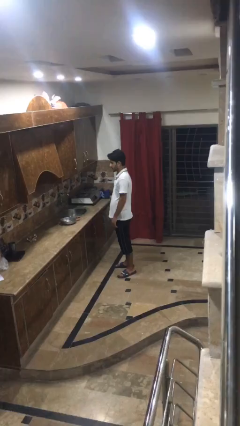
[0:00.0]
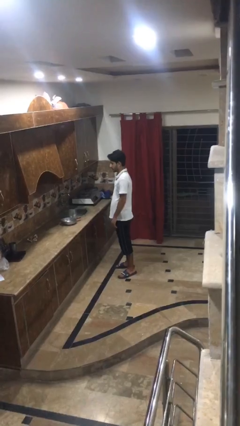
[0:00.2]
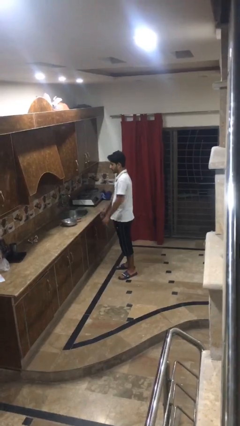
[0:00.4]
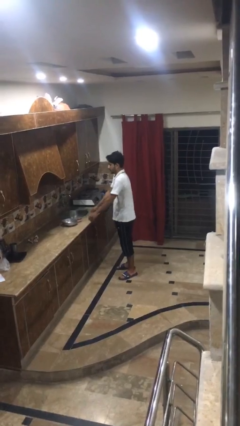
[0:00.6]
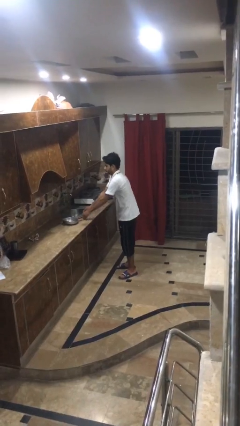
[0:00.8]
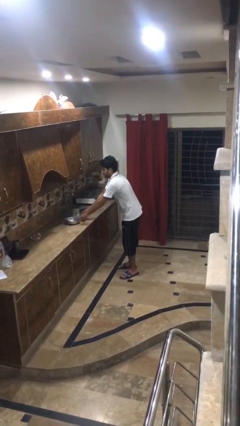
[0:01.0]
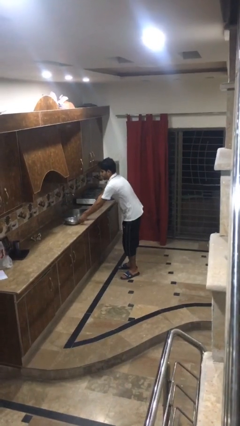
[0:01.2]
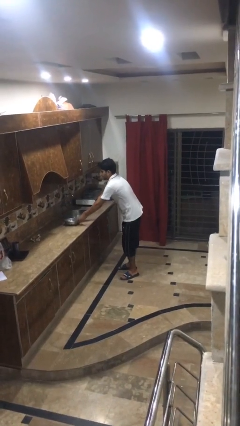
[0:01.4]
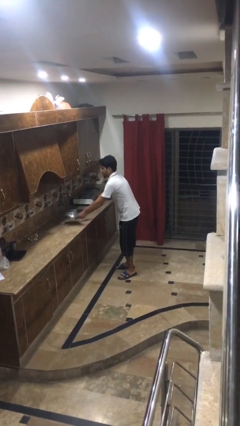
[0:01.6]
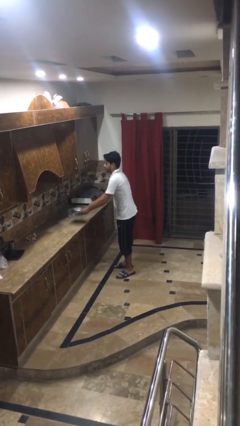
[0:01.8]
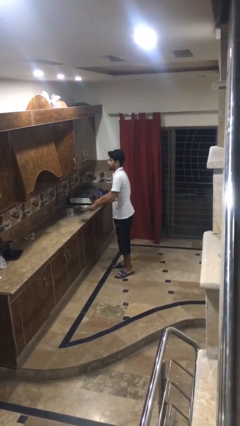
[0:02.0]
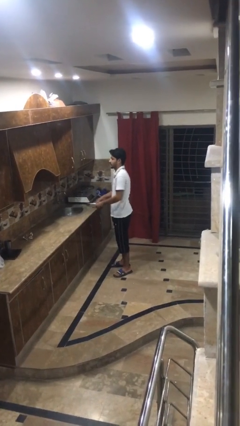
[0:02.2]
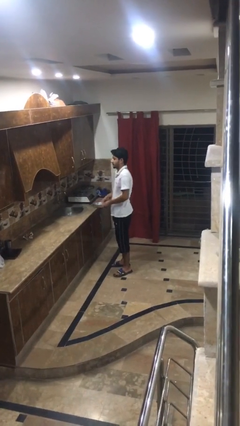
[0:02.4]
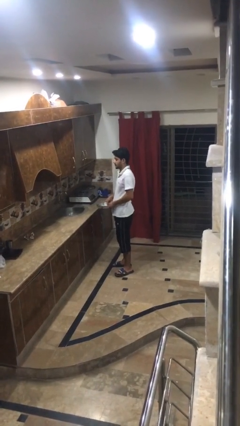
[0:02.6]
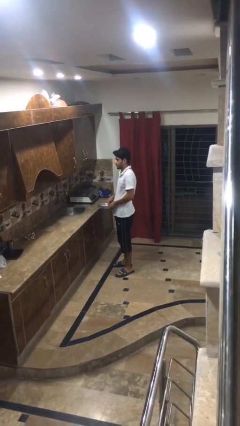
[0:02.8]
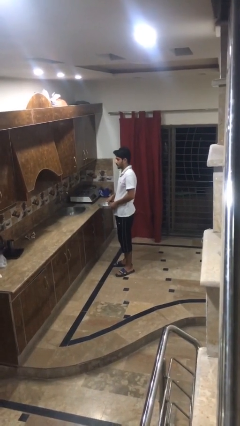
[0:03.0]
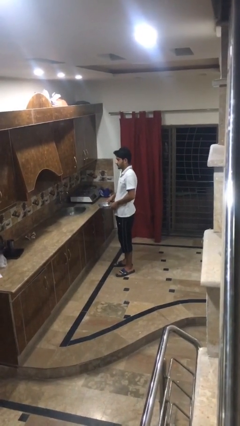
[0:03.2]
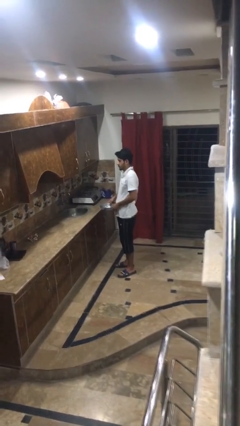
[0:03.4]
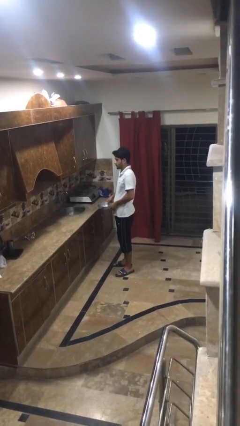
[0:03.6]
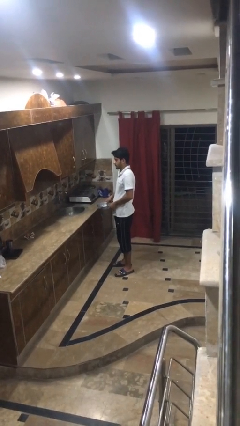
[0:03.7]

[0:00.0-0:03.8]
person picks up object from countertop

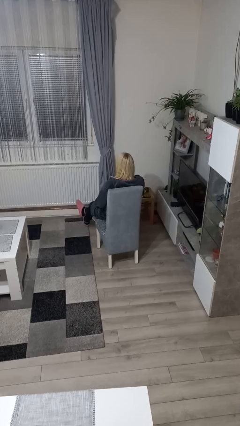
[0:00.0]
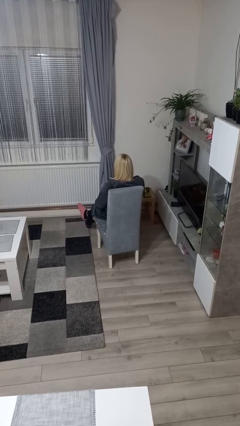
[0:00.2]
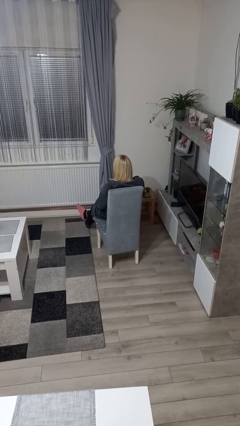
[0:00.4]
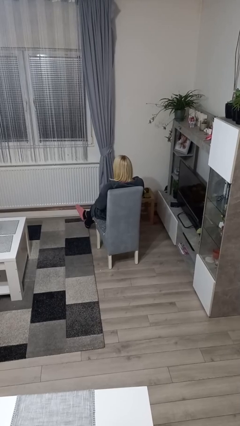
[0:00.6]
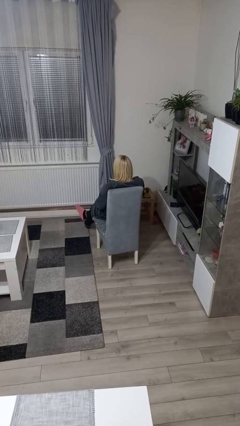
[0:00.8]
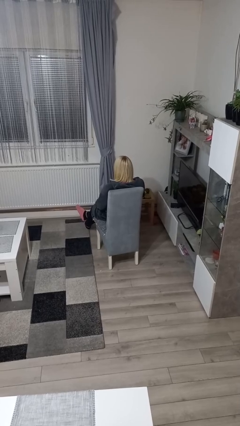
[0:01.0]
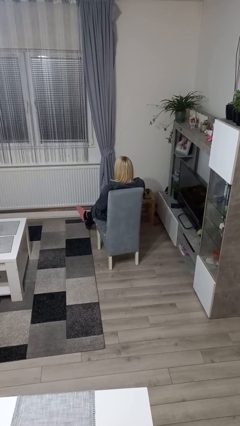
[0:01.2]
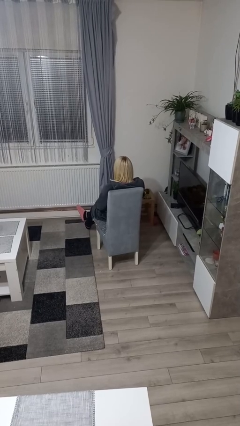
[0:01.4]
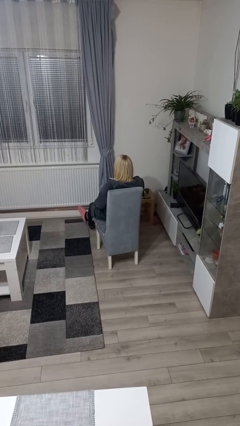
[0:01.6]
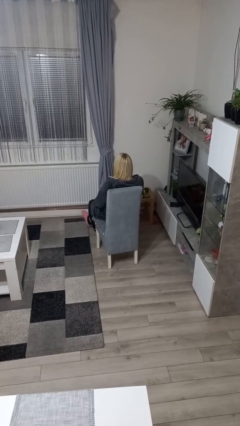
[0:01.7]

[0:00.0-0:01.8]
person crosses legs

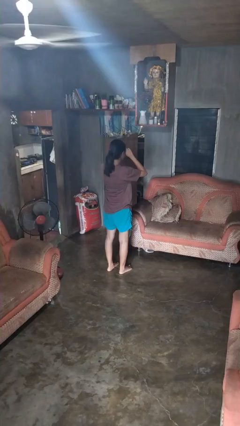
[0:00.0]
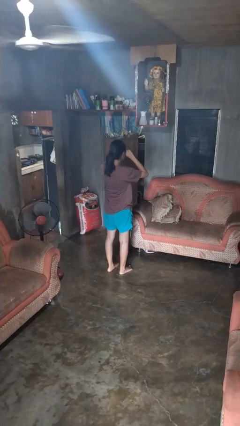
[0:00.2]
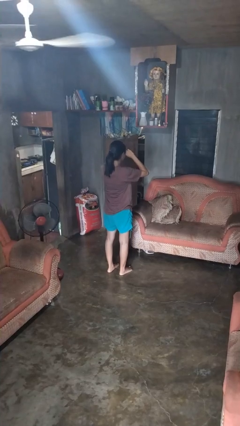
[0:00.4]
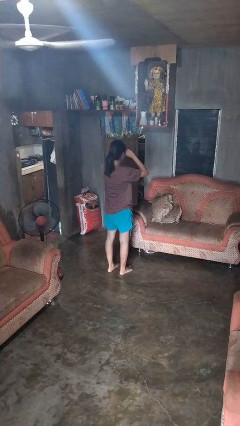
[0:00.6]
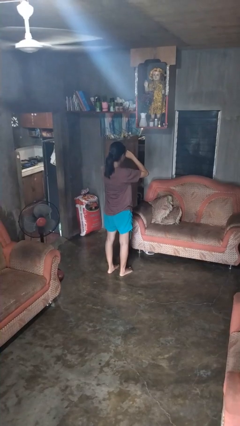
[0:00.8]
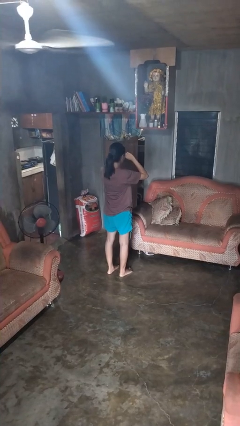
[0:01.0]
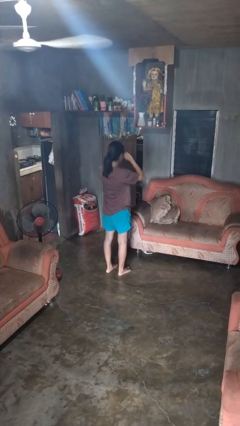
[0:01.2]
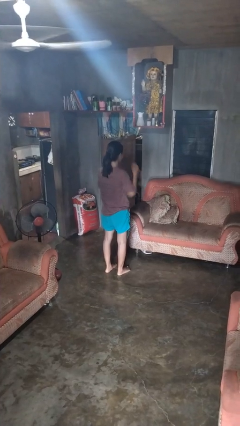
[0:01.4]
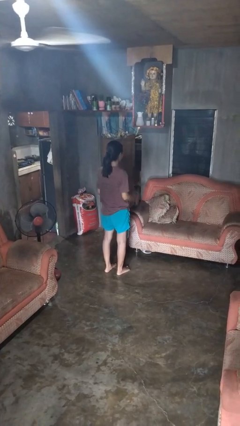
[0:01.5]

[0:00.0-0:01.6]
person rubs eyes

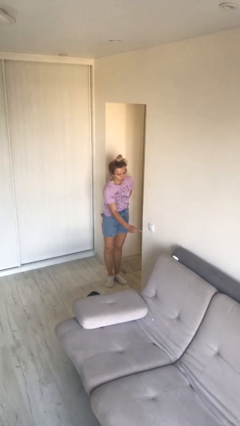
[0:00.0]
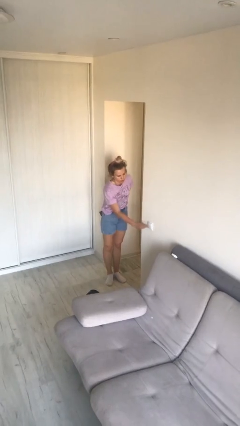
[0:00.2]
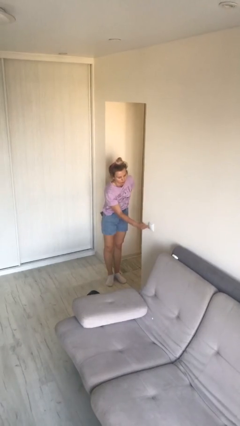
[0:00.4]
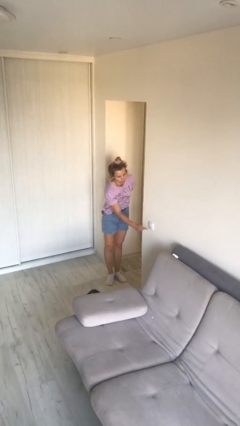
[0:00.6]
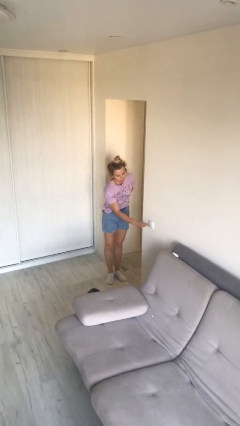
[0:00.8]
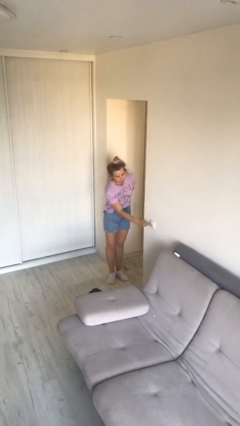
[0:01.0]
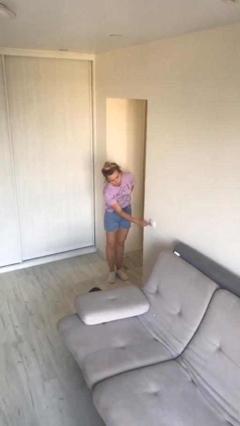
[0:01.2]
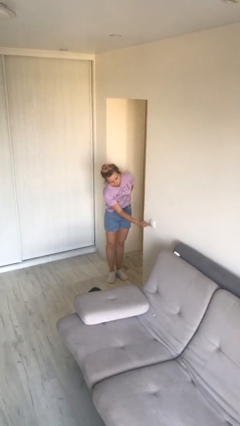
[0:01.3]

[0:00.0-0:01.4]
person taps object with finger

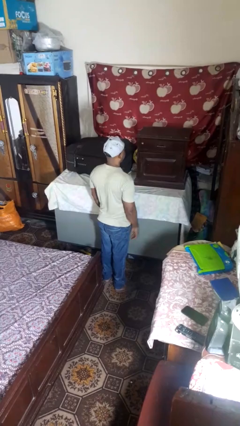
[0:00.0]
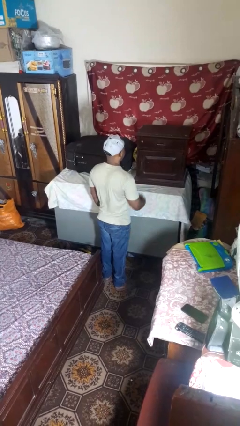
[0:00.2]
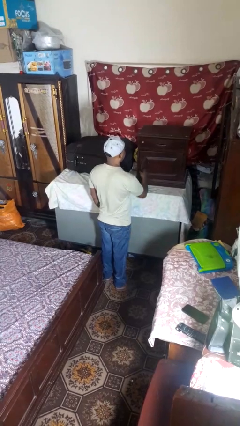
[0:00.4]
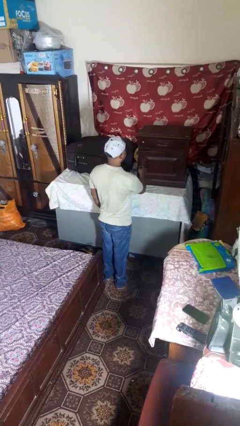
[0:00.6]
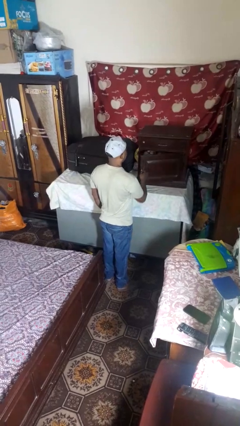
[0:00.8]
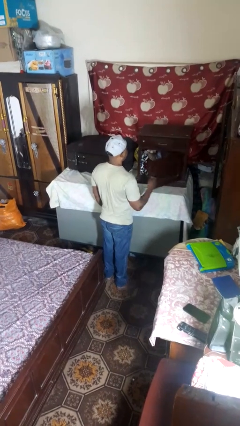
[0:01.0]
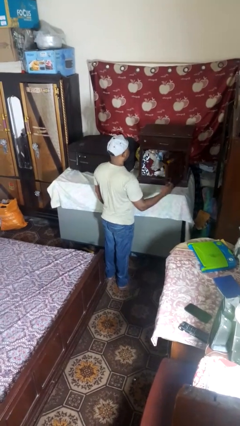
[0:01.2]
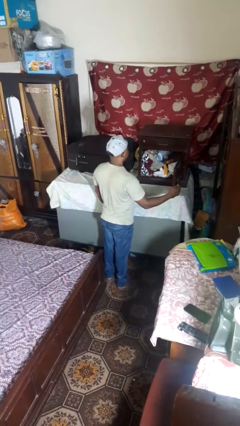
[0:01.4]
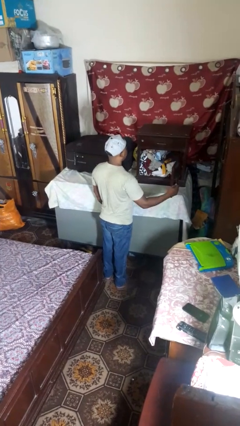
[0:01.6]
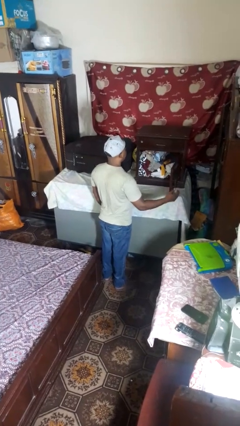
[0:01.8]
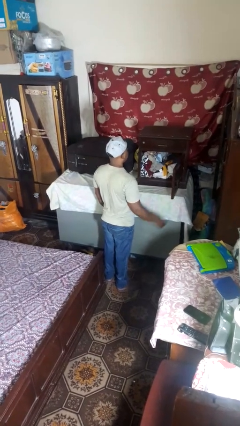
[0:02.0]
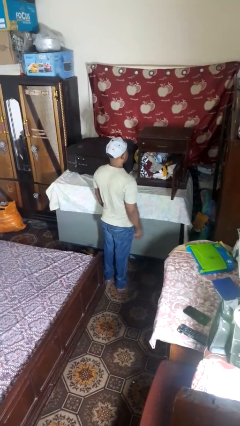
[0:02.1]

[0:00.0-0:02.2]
person opens closet door

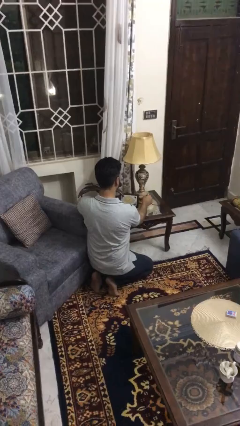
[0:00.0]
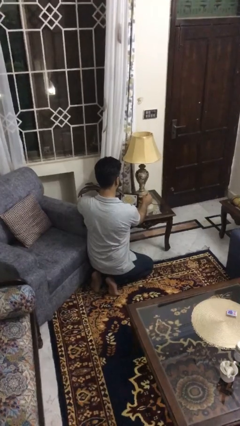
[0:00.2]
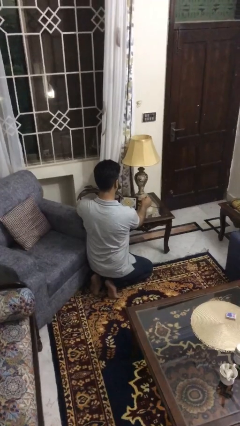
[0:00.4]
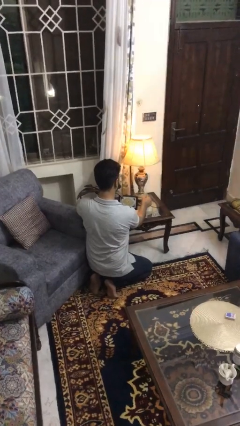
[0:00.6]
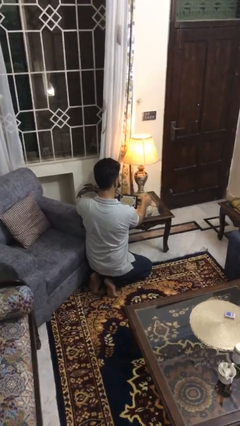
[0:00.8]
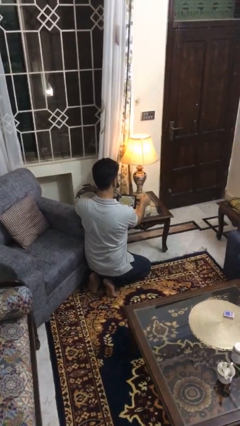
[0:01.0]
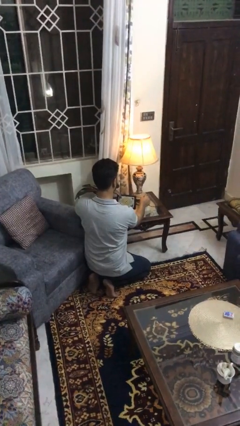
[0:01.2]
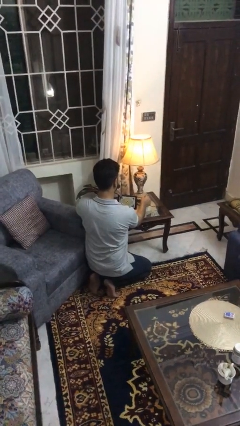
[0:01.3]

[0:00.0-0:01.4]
person turns on lamp

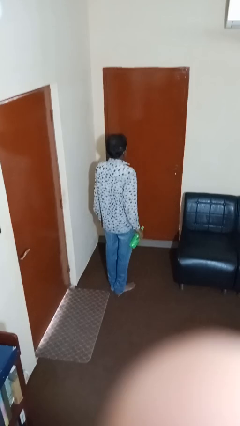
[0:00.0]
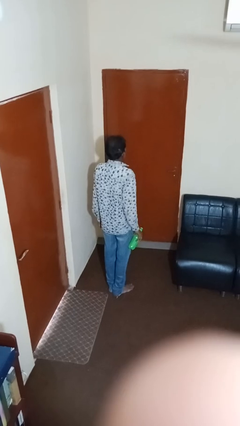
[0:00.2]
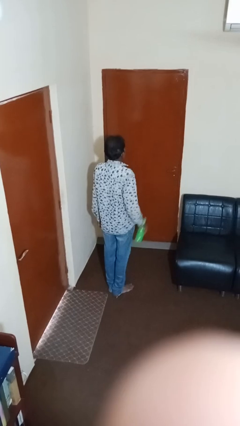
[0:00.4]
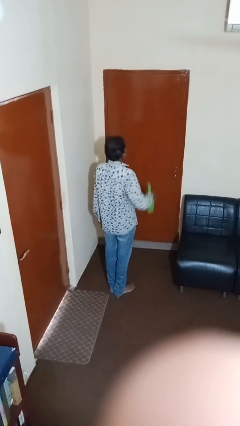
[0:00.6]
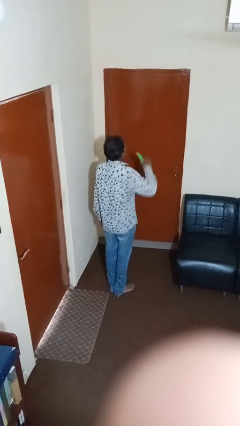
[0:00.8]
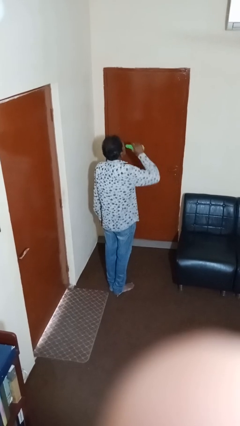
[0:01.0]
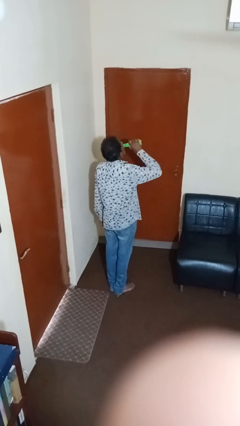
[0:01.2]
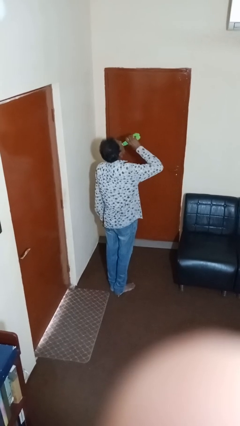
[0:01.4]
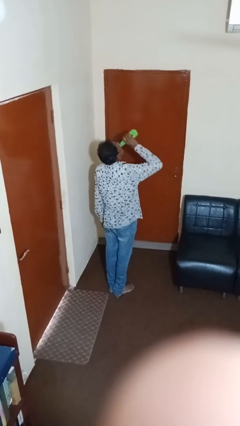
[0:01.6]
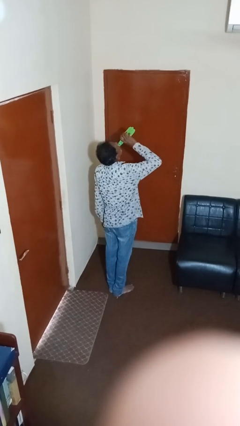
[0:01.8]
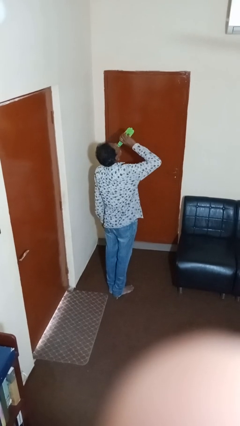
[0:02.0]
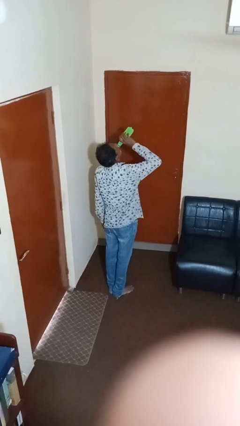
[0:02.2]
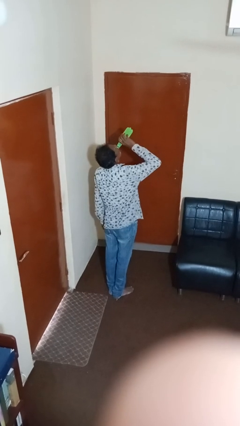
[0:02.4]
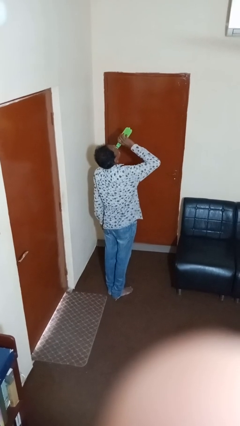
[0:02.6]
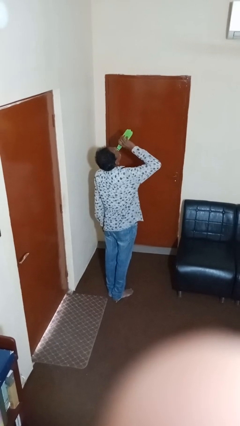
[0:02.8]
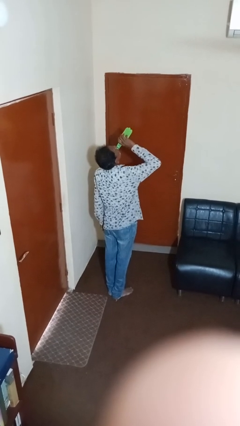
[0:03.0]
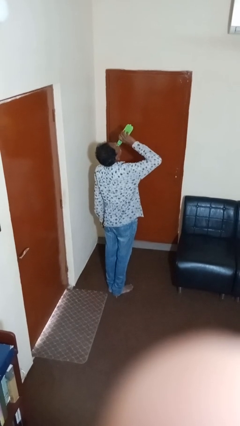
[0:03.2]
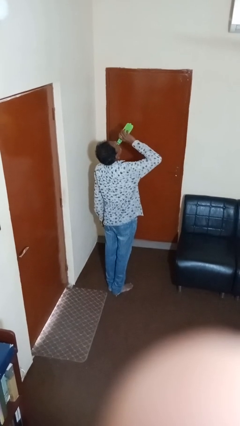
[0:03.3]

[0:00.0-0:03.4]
person drinks from bottle

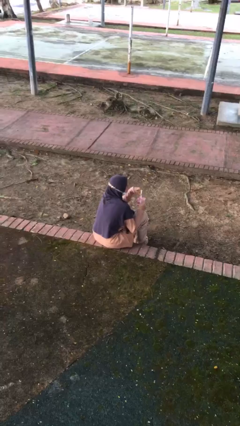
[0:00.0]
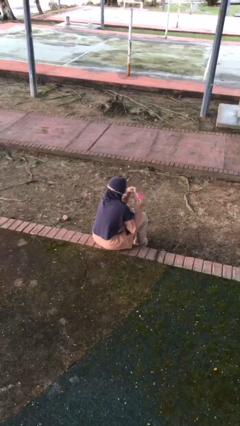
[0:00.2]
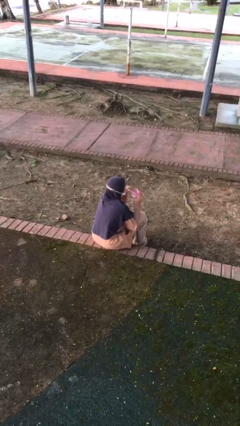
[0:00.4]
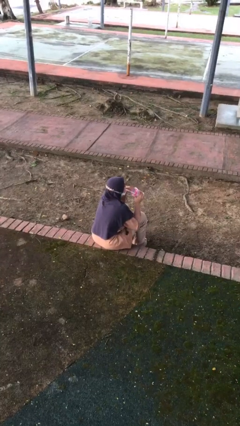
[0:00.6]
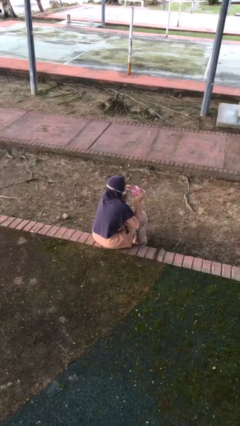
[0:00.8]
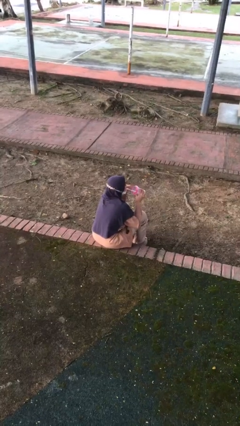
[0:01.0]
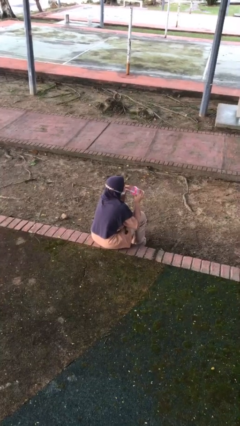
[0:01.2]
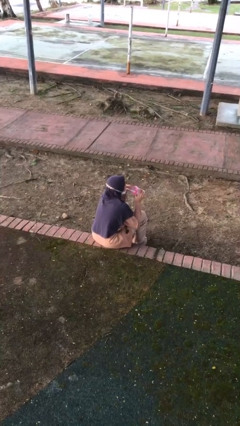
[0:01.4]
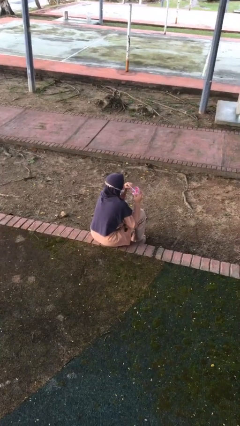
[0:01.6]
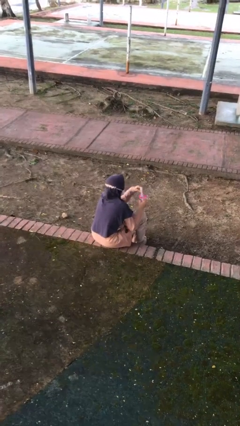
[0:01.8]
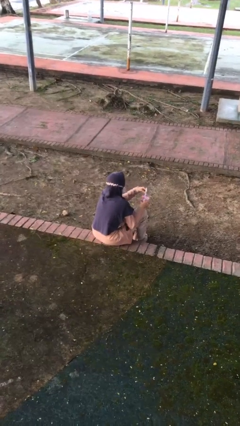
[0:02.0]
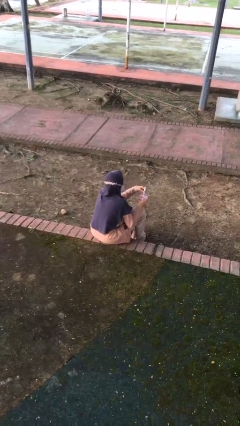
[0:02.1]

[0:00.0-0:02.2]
person drinks from straw
